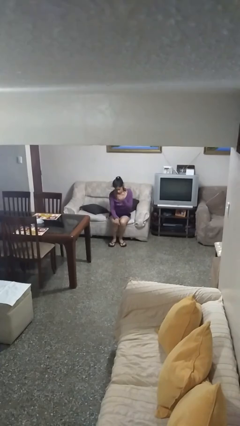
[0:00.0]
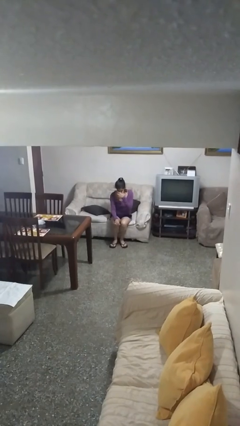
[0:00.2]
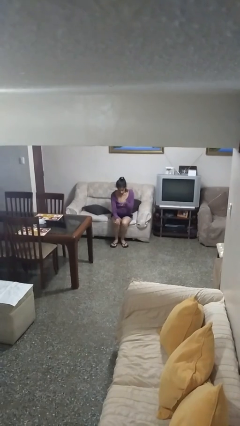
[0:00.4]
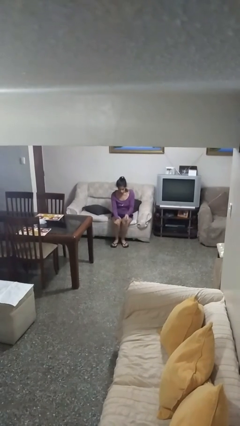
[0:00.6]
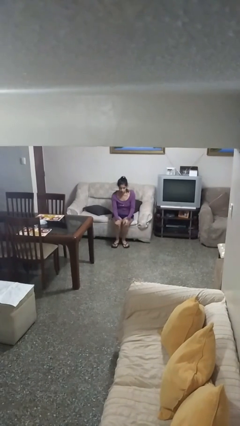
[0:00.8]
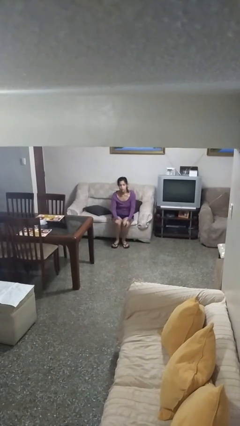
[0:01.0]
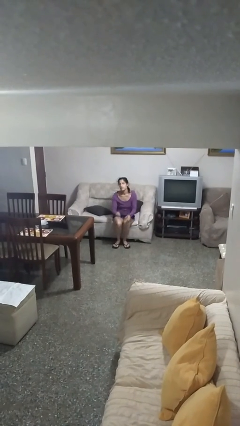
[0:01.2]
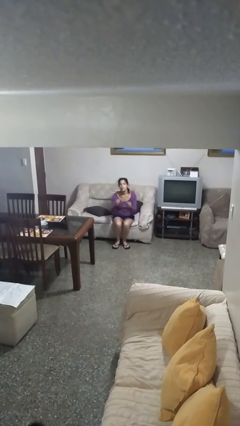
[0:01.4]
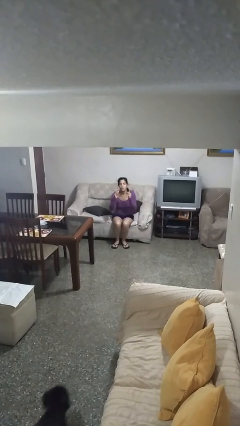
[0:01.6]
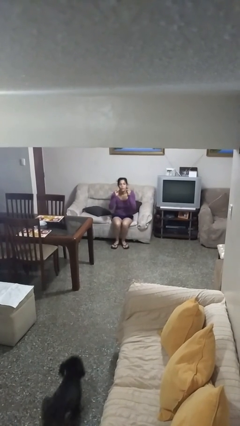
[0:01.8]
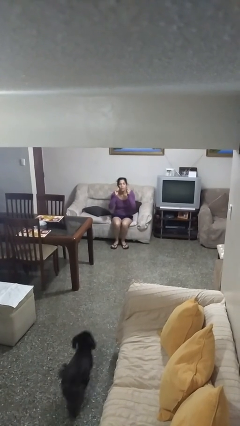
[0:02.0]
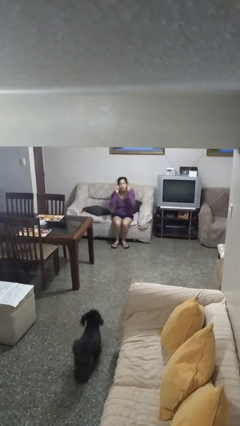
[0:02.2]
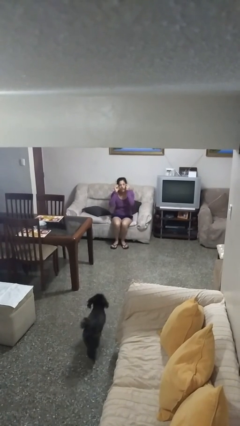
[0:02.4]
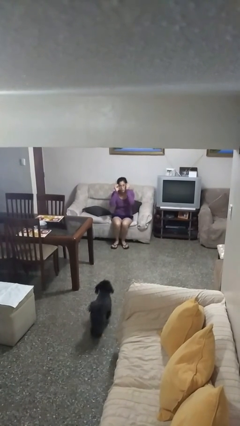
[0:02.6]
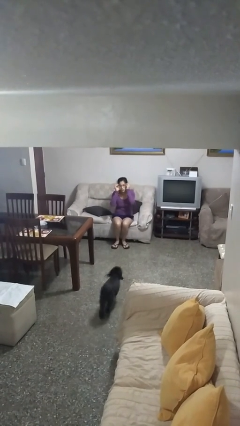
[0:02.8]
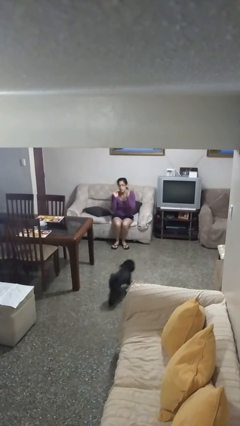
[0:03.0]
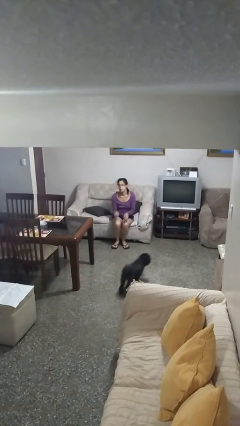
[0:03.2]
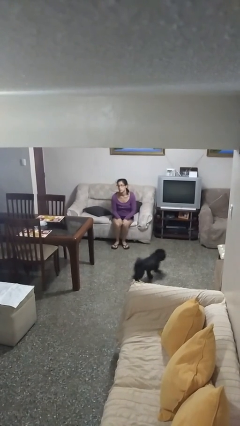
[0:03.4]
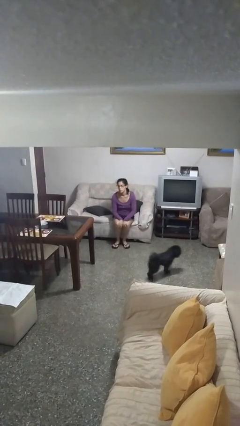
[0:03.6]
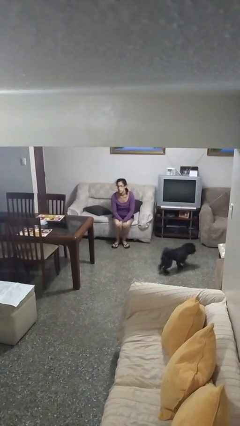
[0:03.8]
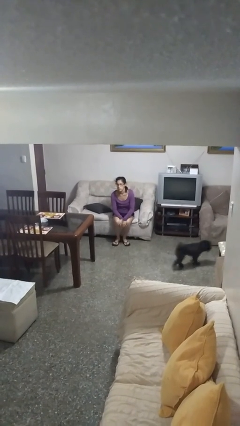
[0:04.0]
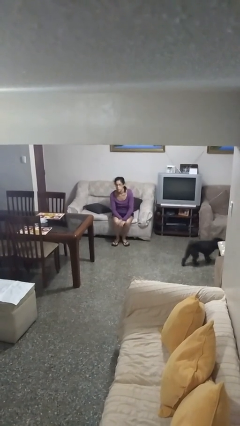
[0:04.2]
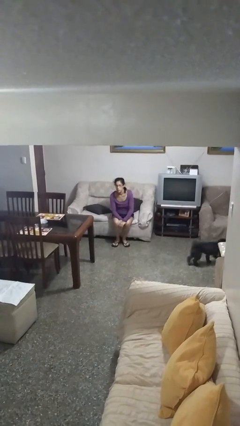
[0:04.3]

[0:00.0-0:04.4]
person puts on glasses

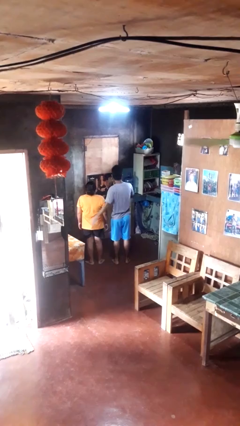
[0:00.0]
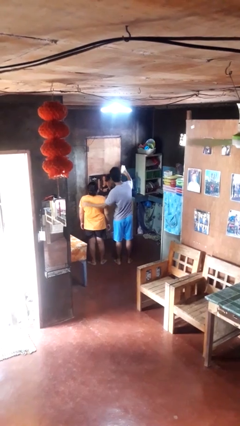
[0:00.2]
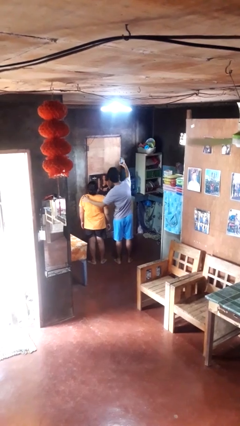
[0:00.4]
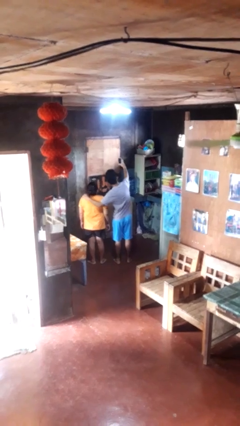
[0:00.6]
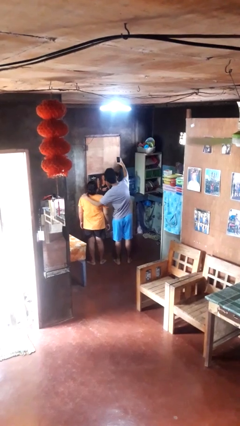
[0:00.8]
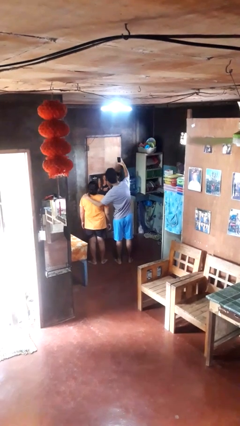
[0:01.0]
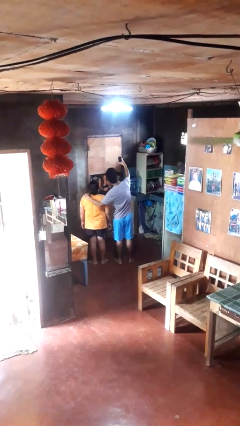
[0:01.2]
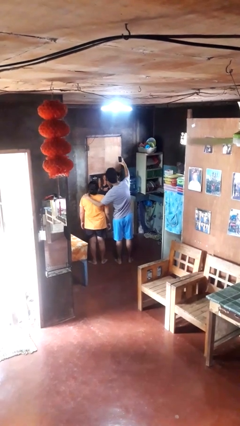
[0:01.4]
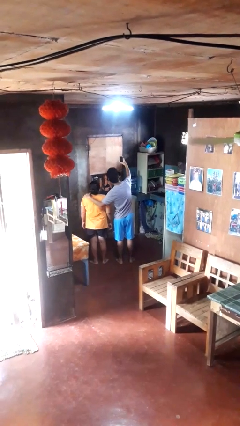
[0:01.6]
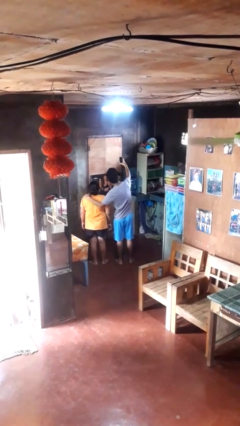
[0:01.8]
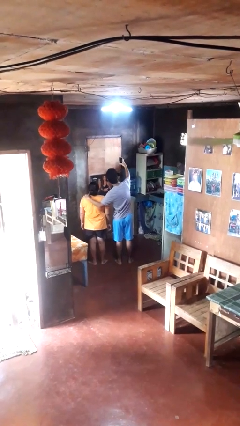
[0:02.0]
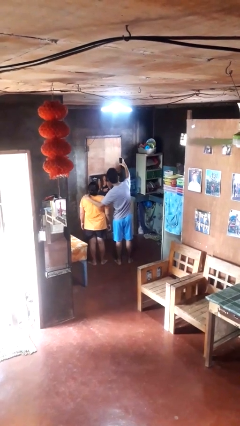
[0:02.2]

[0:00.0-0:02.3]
person takes selfie with person

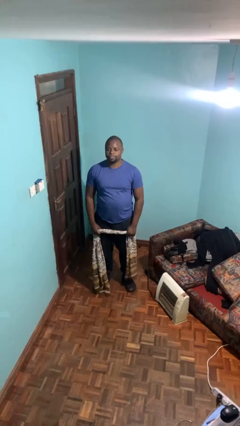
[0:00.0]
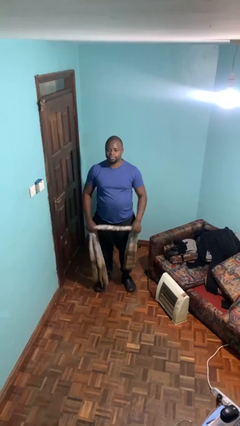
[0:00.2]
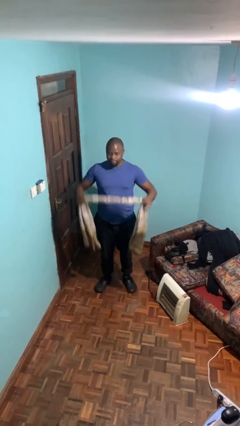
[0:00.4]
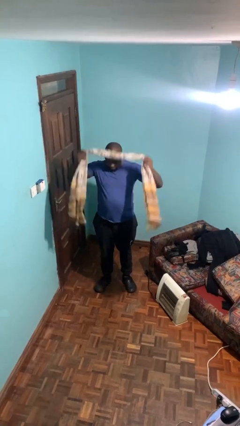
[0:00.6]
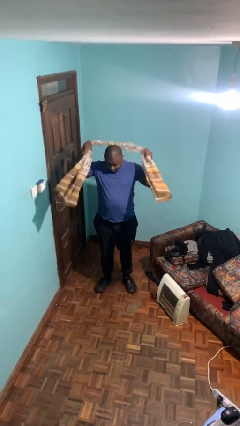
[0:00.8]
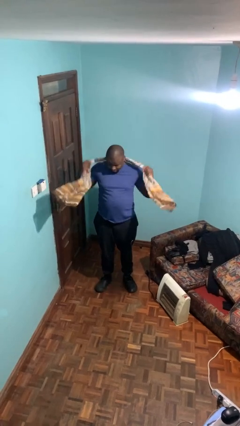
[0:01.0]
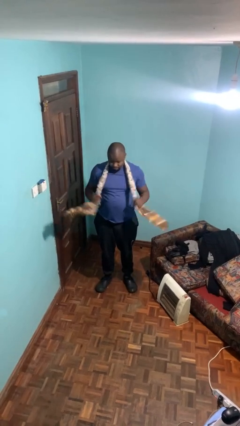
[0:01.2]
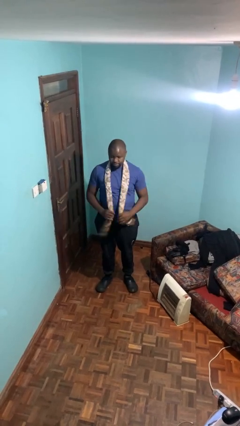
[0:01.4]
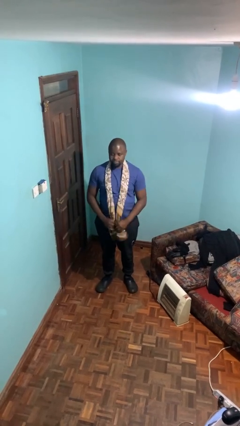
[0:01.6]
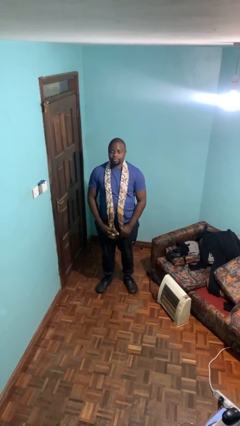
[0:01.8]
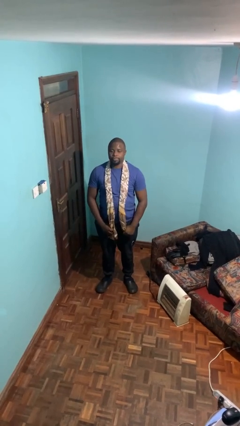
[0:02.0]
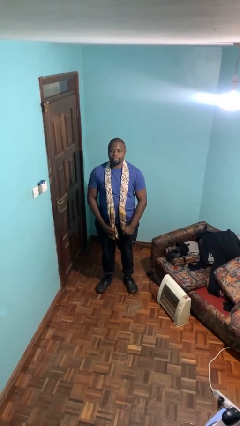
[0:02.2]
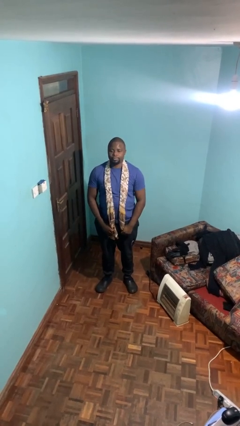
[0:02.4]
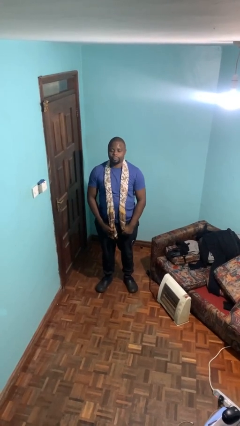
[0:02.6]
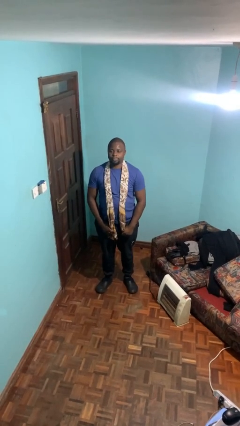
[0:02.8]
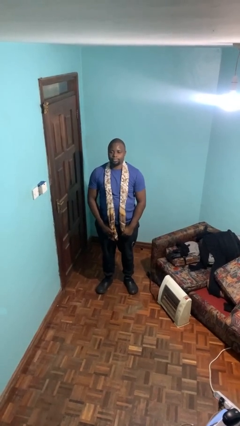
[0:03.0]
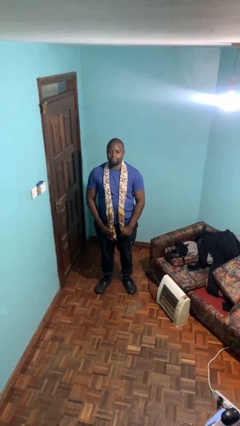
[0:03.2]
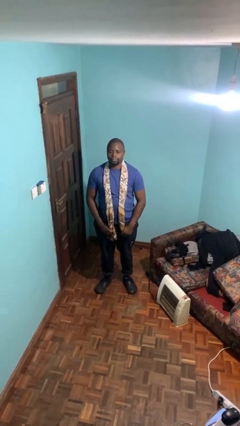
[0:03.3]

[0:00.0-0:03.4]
person puts on scarf

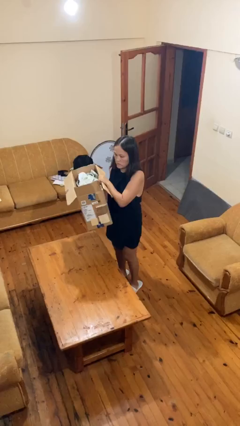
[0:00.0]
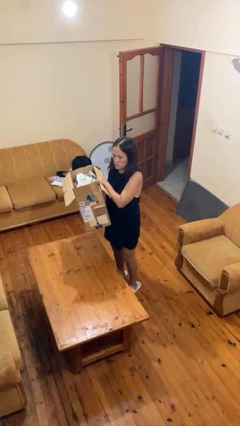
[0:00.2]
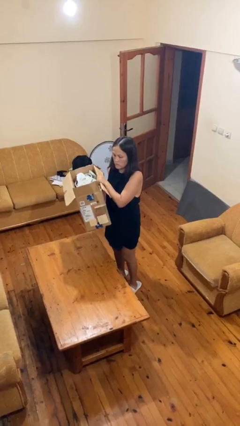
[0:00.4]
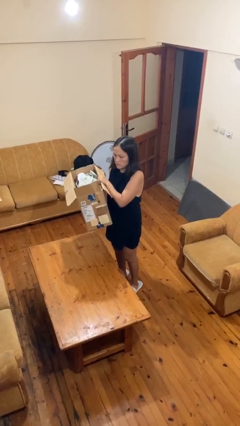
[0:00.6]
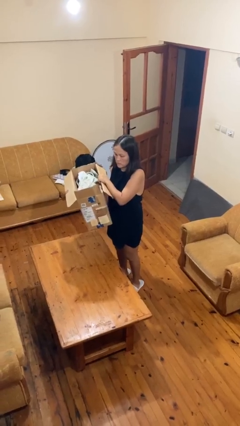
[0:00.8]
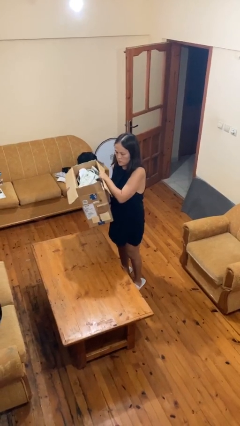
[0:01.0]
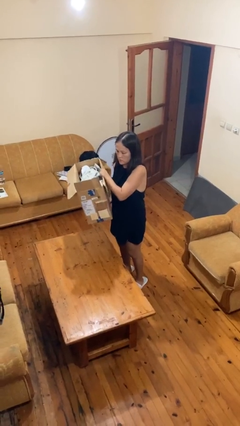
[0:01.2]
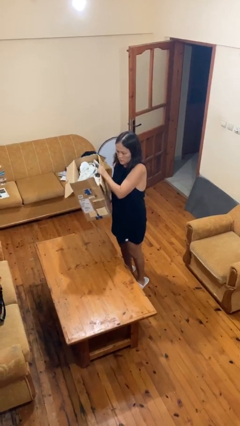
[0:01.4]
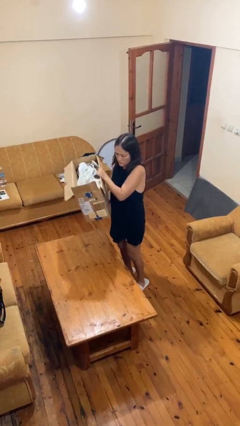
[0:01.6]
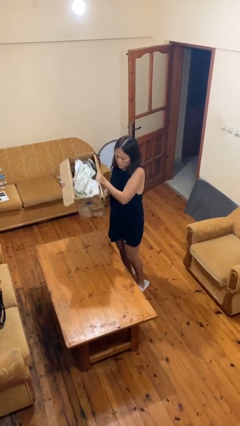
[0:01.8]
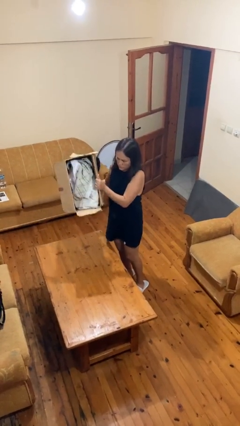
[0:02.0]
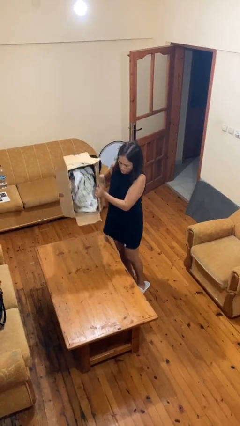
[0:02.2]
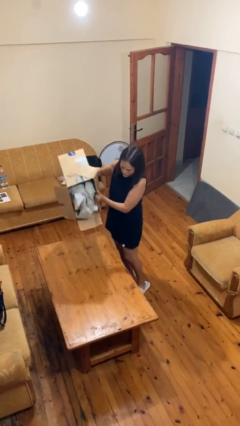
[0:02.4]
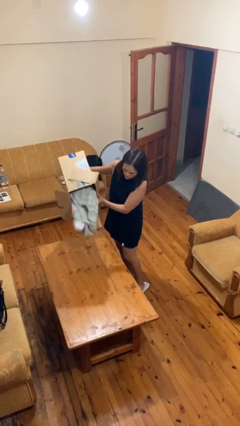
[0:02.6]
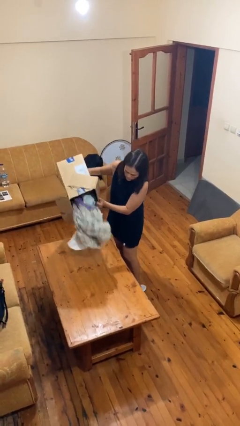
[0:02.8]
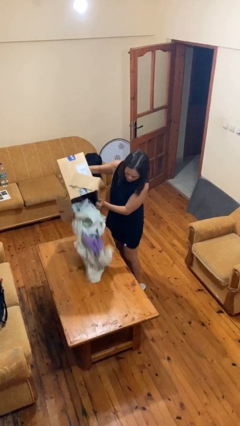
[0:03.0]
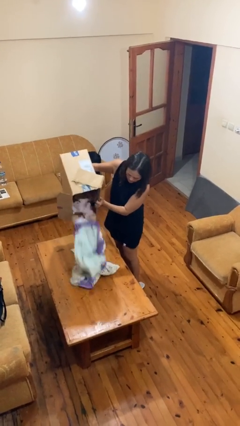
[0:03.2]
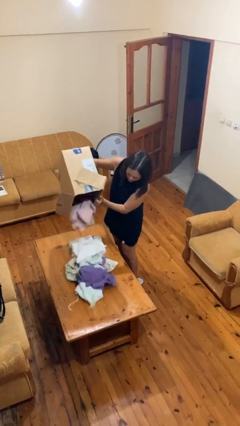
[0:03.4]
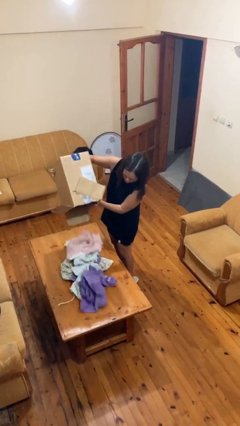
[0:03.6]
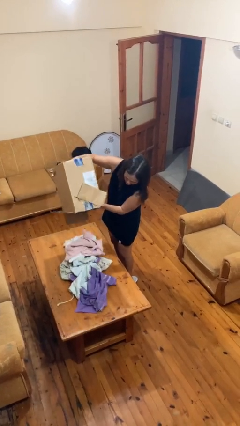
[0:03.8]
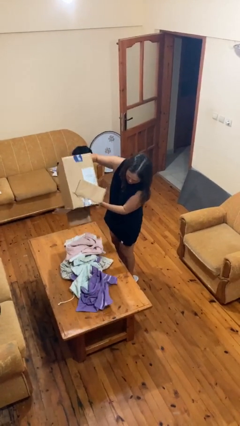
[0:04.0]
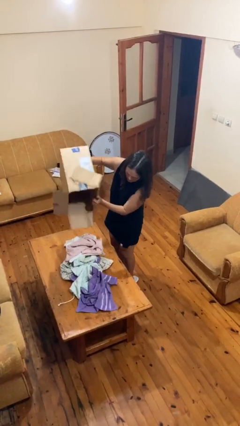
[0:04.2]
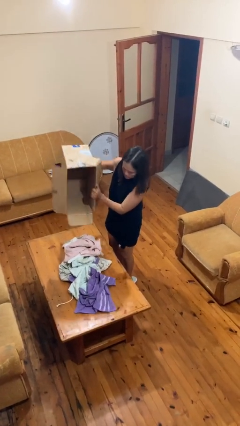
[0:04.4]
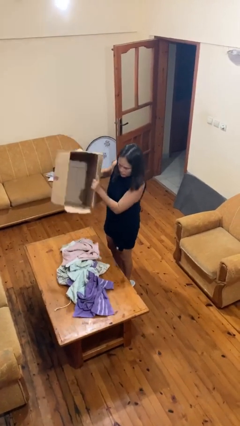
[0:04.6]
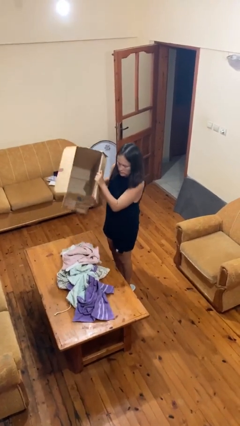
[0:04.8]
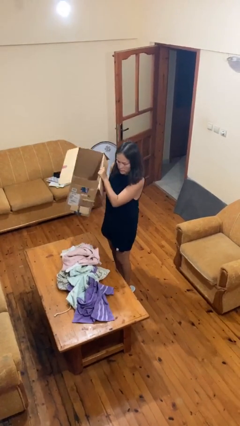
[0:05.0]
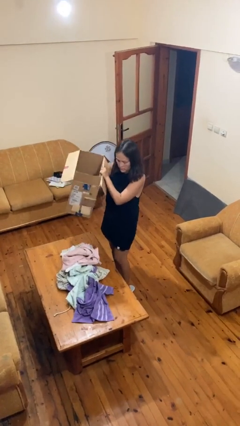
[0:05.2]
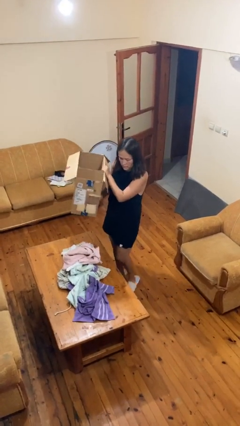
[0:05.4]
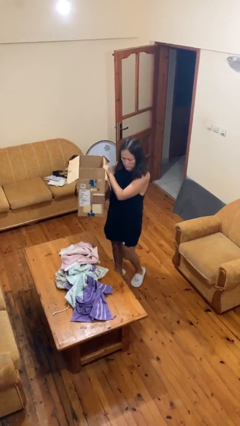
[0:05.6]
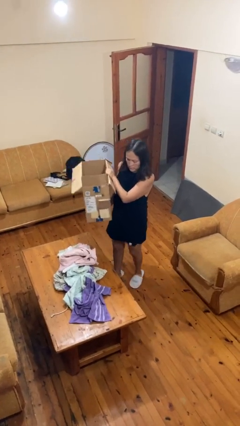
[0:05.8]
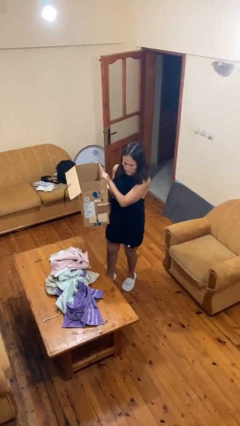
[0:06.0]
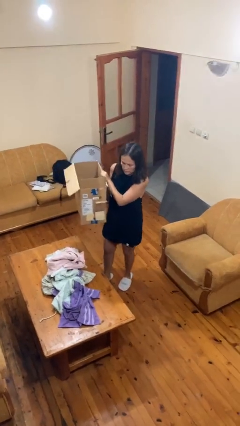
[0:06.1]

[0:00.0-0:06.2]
person unloads box onto table

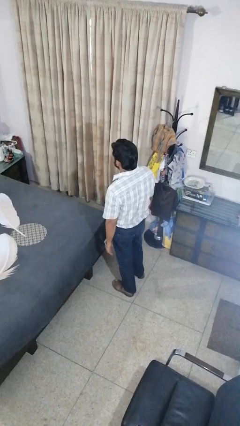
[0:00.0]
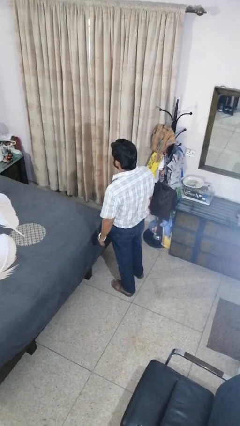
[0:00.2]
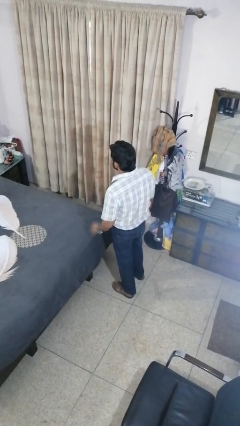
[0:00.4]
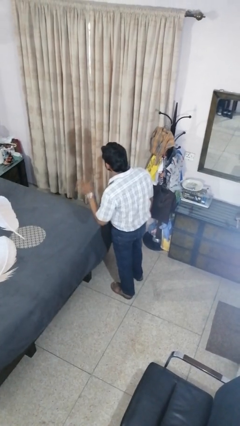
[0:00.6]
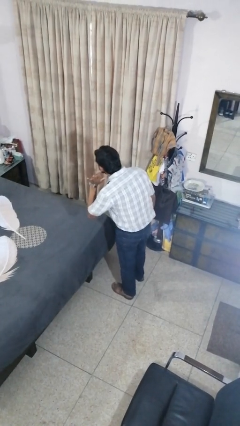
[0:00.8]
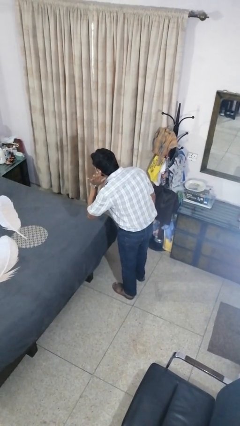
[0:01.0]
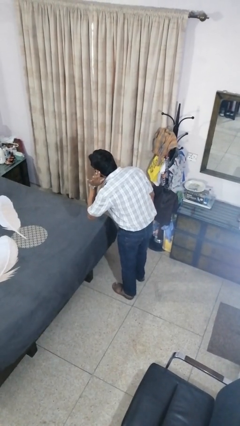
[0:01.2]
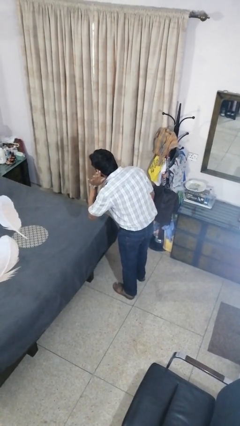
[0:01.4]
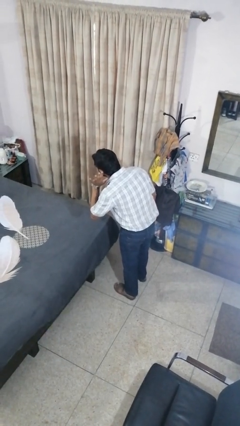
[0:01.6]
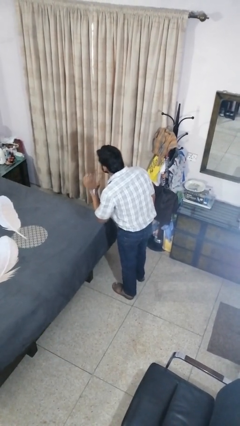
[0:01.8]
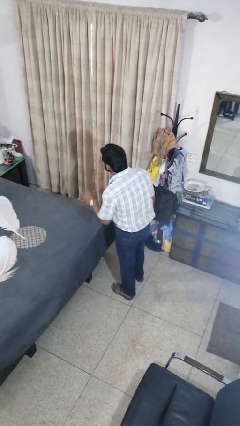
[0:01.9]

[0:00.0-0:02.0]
person gestures listen closely
